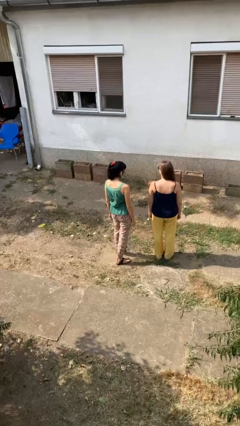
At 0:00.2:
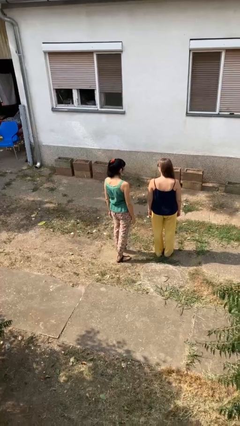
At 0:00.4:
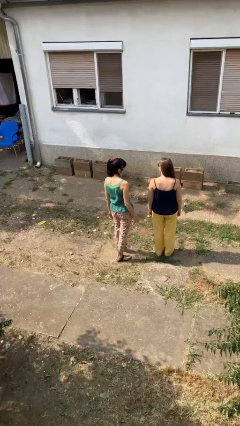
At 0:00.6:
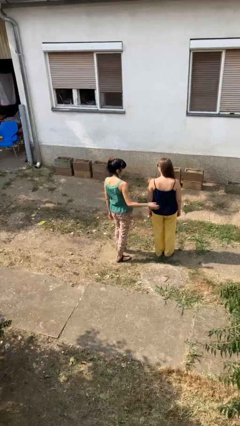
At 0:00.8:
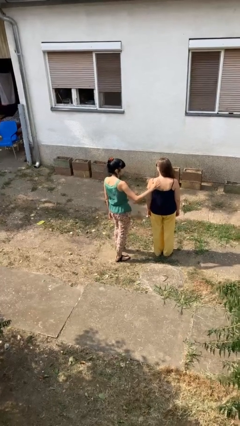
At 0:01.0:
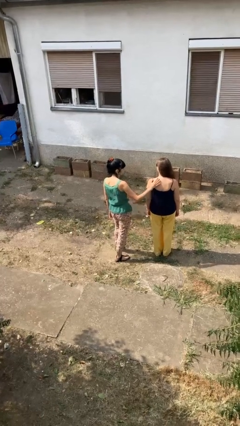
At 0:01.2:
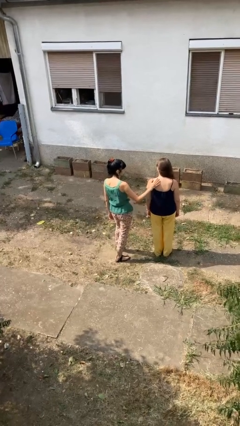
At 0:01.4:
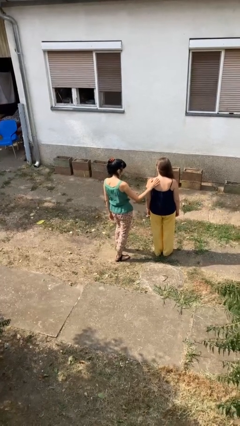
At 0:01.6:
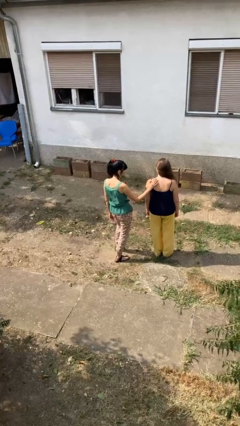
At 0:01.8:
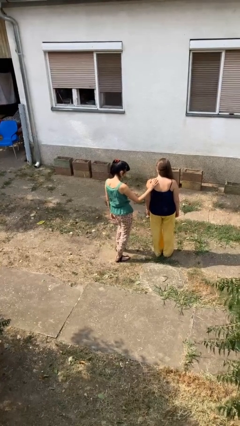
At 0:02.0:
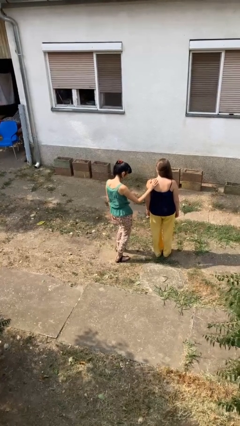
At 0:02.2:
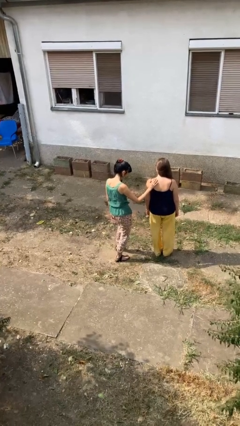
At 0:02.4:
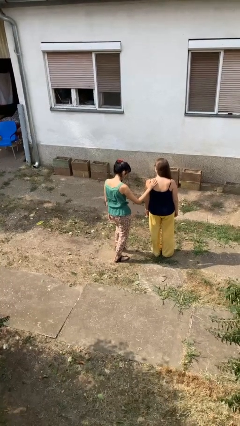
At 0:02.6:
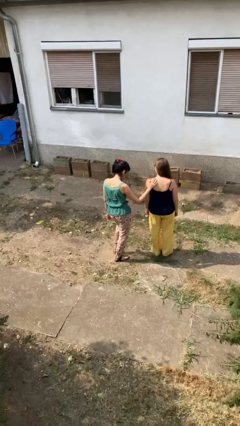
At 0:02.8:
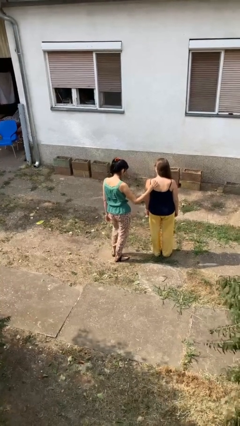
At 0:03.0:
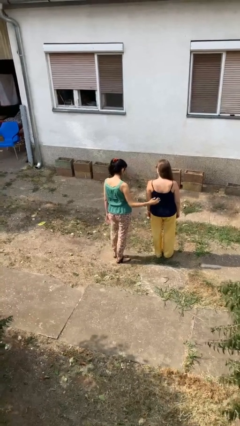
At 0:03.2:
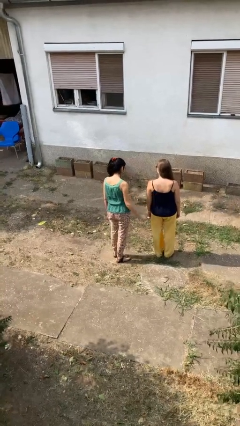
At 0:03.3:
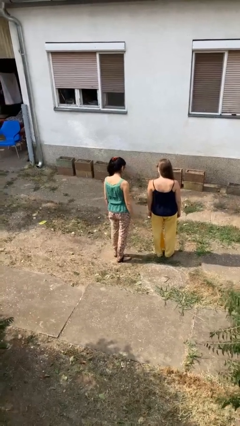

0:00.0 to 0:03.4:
person touches back of person

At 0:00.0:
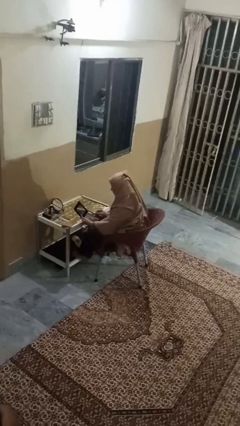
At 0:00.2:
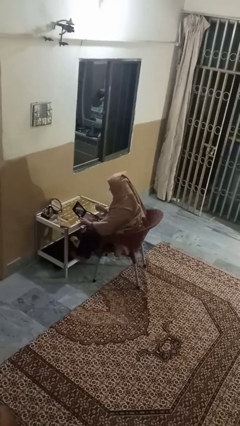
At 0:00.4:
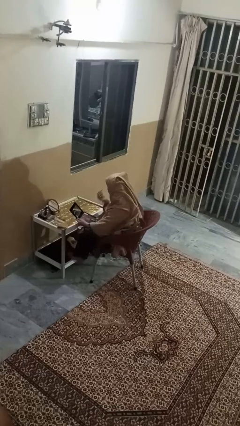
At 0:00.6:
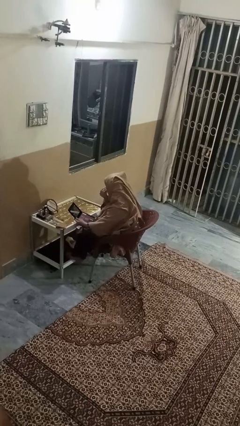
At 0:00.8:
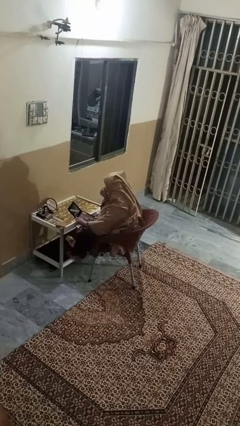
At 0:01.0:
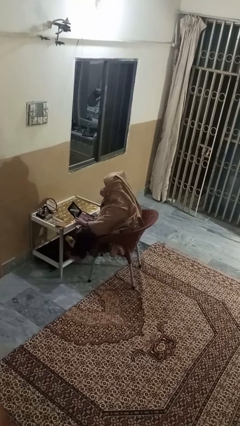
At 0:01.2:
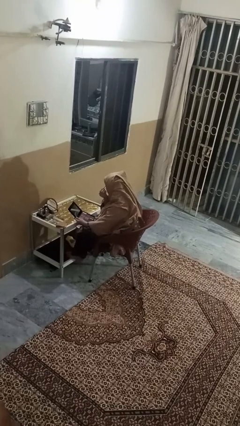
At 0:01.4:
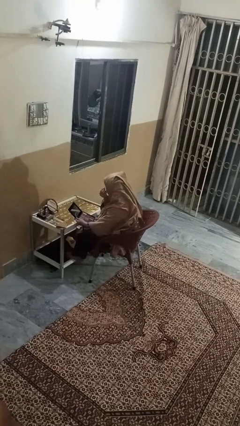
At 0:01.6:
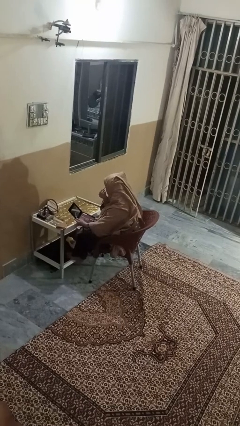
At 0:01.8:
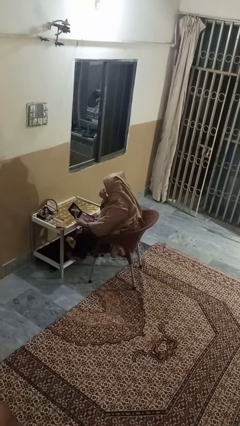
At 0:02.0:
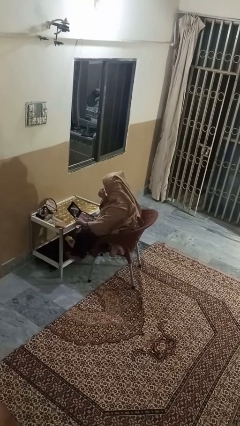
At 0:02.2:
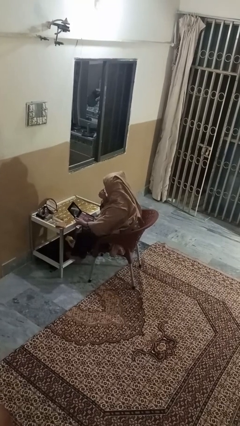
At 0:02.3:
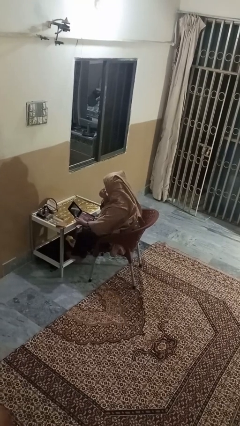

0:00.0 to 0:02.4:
person applies eye makeup

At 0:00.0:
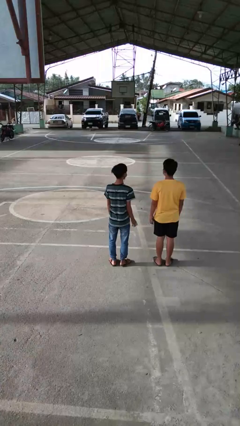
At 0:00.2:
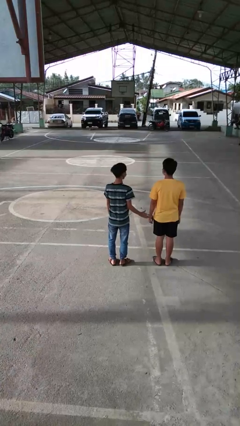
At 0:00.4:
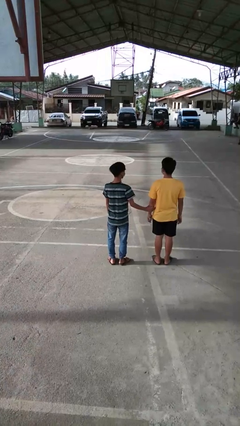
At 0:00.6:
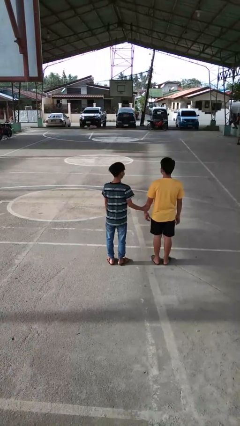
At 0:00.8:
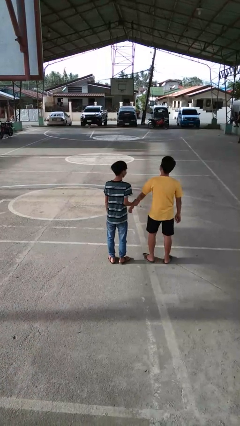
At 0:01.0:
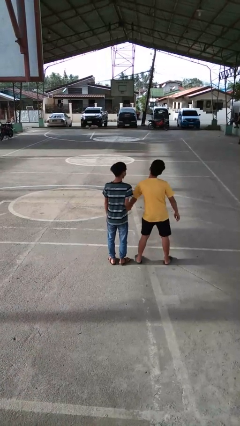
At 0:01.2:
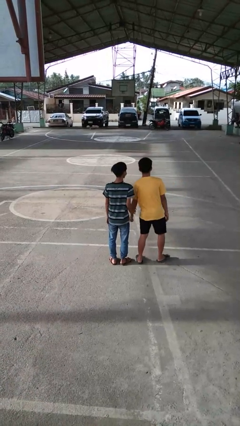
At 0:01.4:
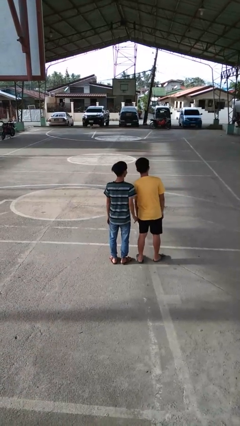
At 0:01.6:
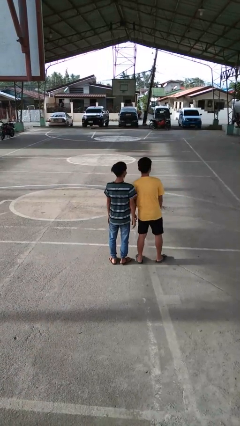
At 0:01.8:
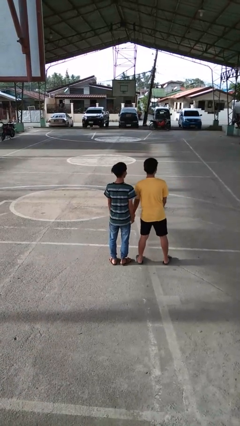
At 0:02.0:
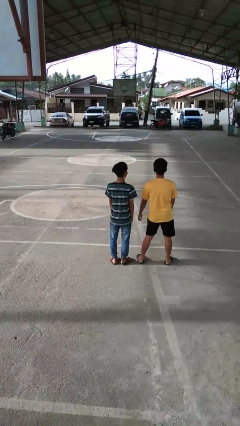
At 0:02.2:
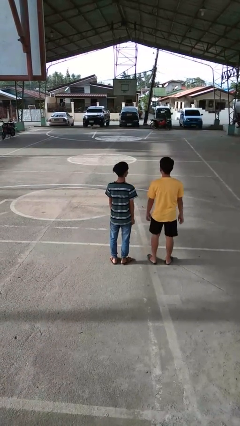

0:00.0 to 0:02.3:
person grabs person by forearm

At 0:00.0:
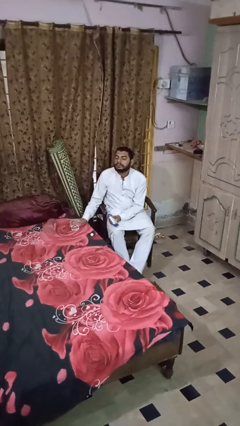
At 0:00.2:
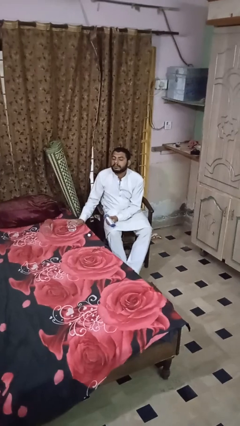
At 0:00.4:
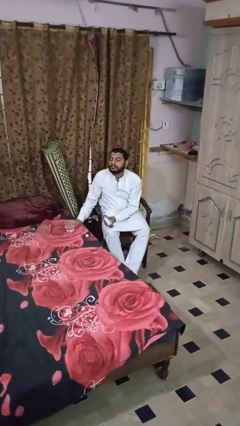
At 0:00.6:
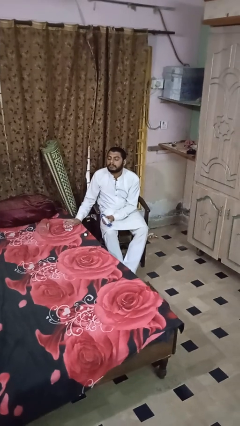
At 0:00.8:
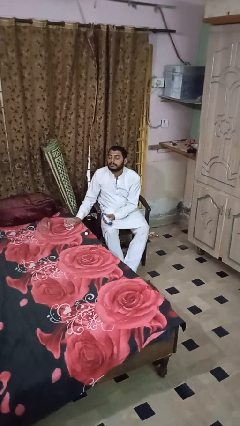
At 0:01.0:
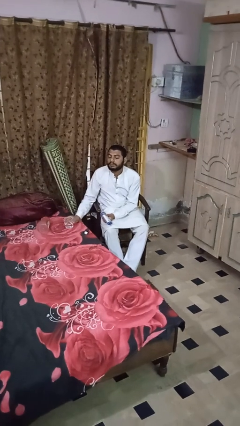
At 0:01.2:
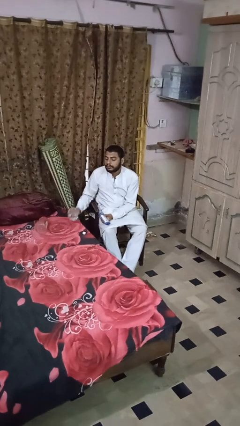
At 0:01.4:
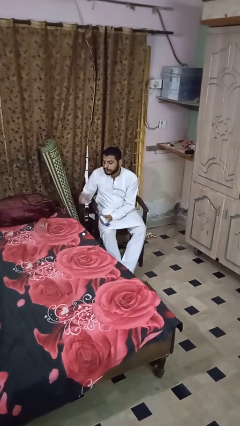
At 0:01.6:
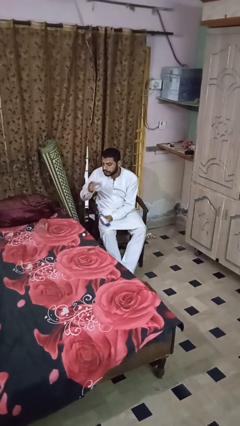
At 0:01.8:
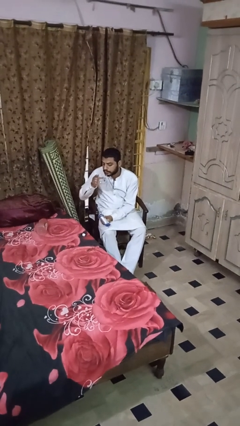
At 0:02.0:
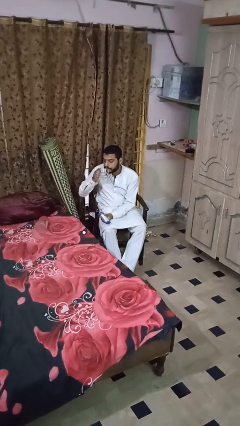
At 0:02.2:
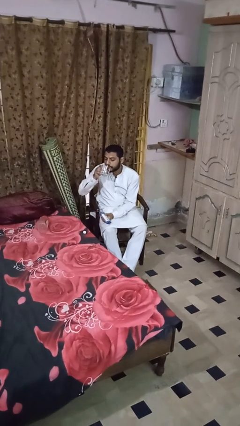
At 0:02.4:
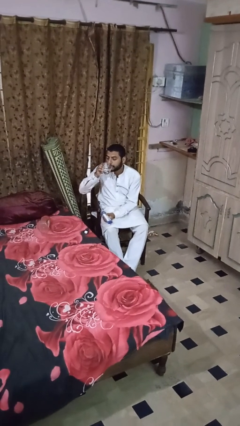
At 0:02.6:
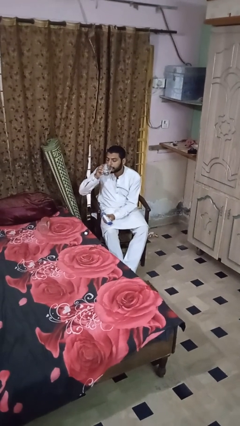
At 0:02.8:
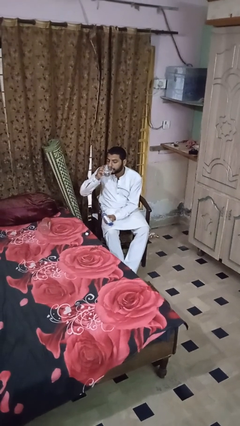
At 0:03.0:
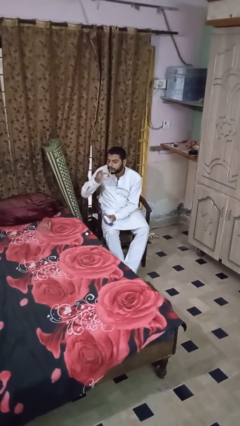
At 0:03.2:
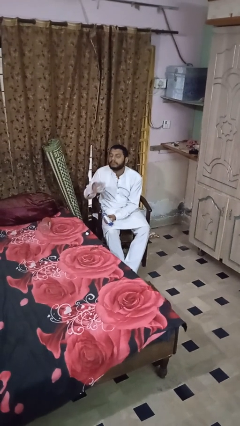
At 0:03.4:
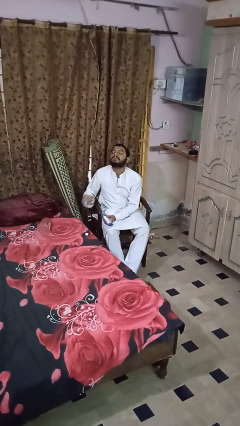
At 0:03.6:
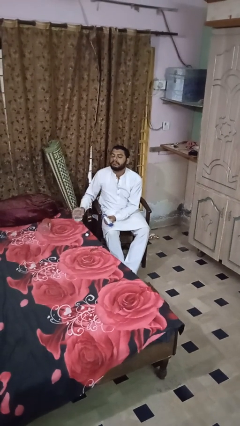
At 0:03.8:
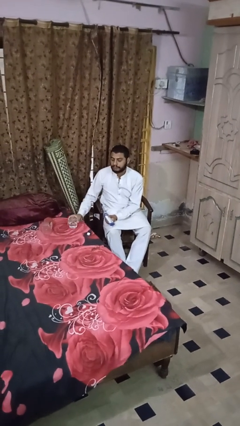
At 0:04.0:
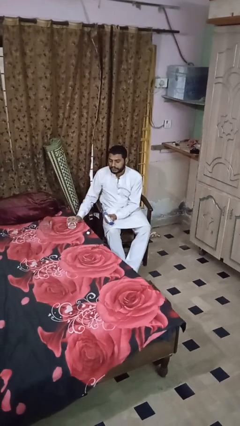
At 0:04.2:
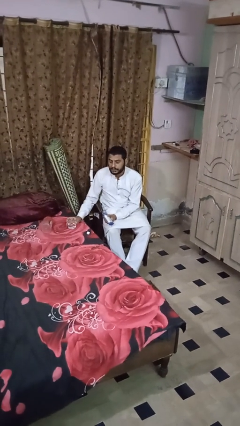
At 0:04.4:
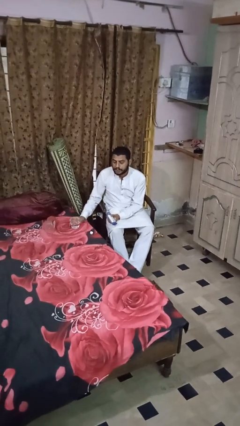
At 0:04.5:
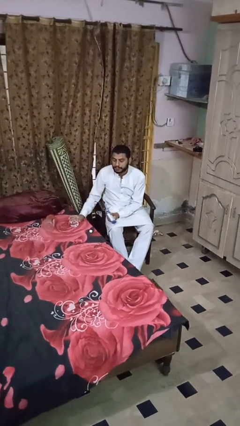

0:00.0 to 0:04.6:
person drinks from cup

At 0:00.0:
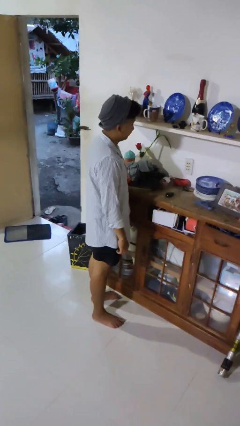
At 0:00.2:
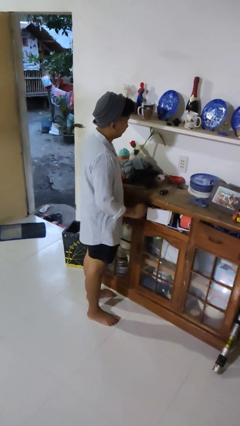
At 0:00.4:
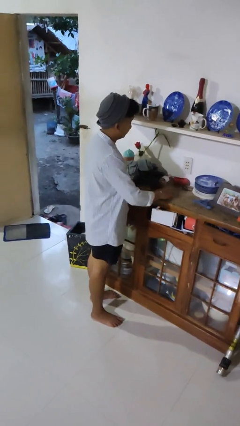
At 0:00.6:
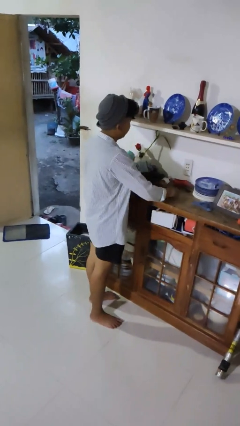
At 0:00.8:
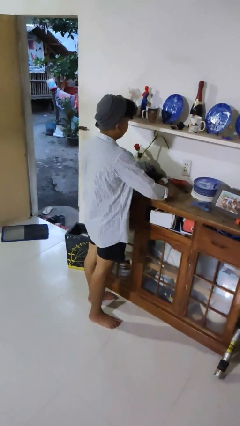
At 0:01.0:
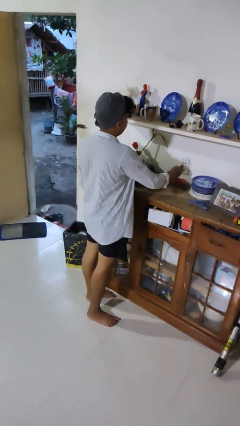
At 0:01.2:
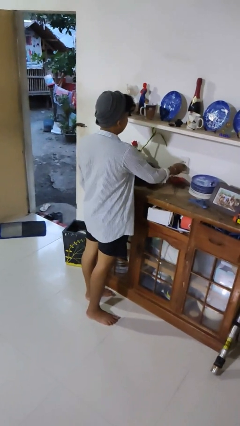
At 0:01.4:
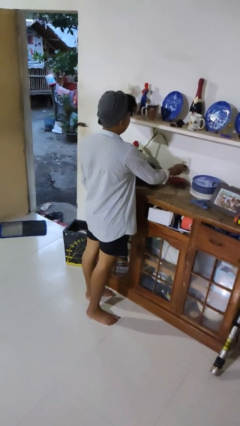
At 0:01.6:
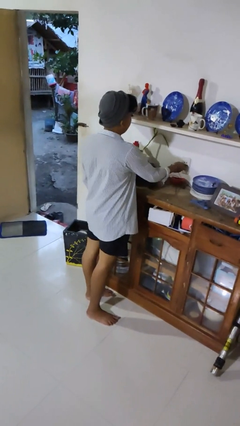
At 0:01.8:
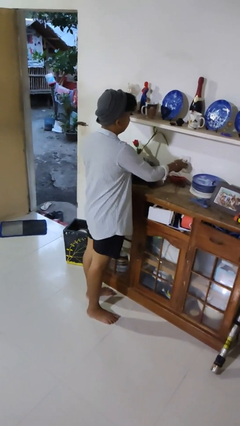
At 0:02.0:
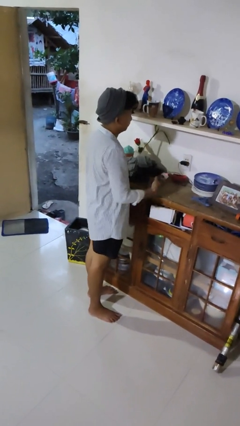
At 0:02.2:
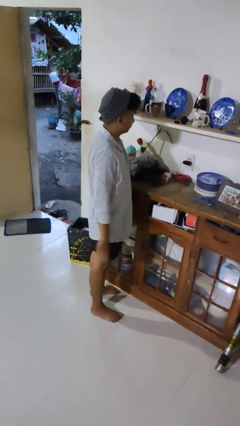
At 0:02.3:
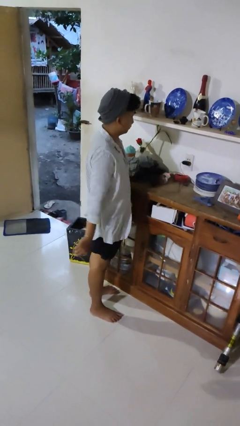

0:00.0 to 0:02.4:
person plugs into electrical socket

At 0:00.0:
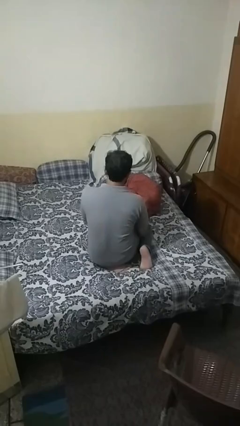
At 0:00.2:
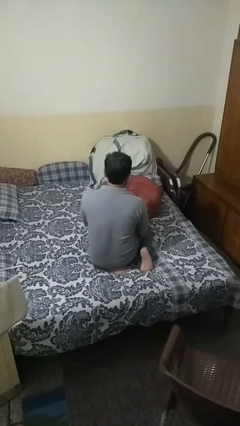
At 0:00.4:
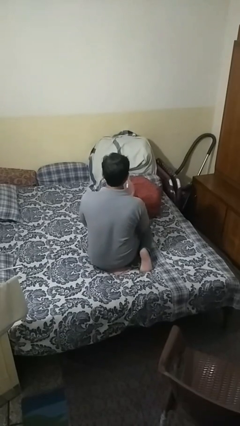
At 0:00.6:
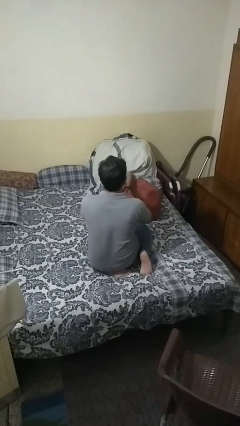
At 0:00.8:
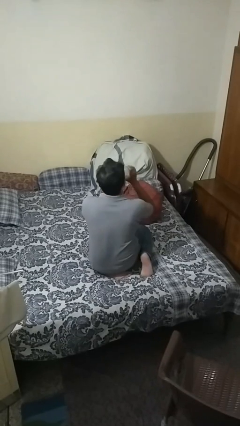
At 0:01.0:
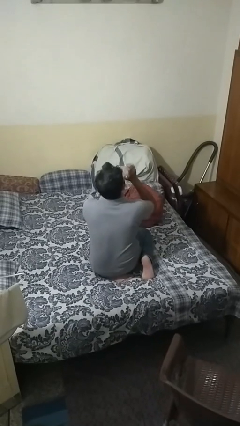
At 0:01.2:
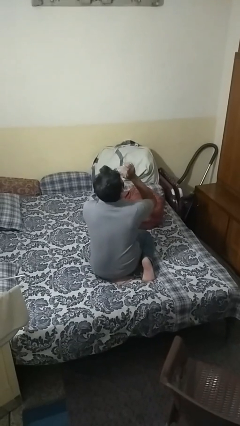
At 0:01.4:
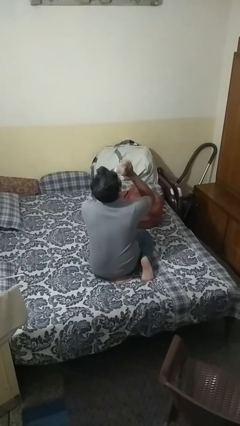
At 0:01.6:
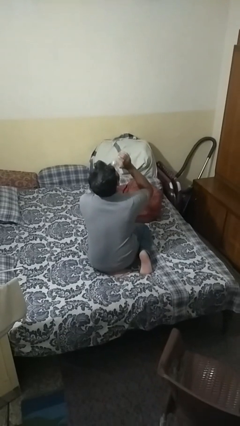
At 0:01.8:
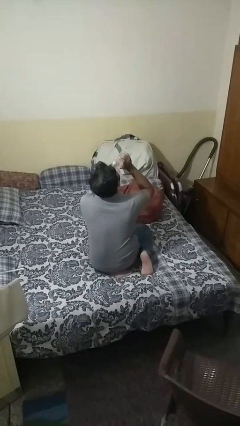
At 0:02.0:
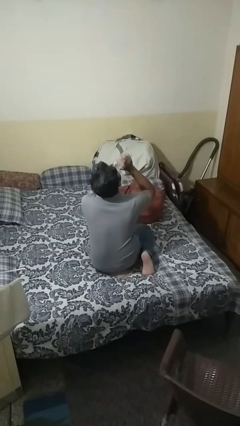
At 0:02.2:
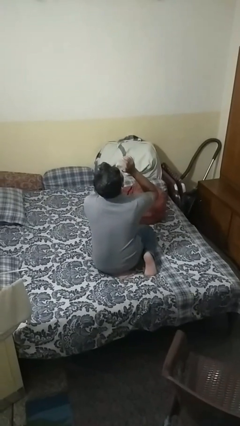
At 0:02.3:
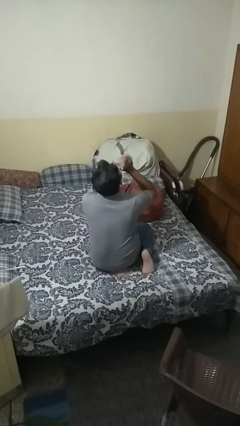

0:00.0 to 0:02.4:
person drinks from bottle

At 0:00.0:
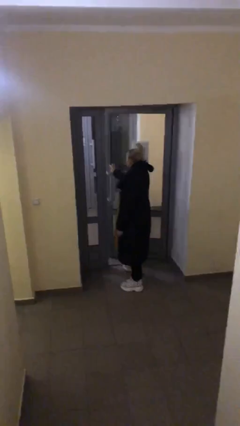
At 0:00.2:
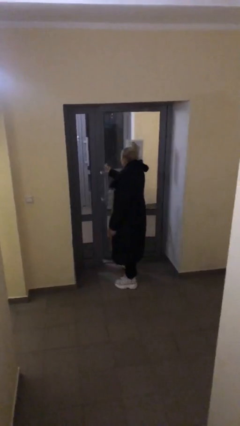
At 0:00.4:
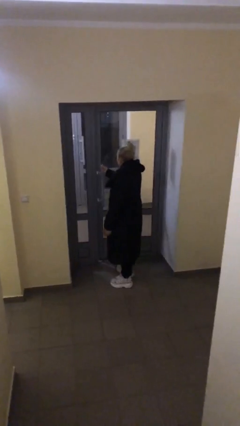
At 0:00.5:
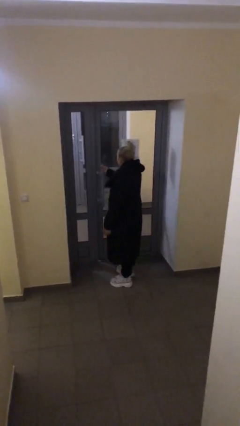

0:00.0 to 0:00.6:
person closes facility door
